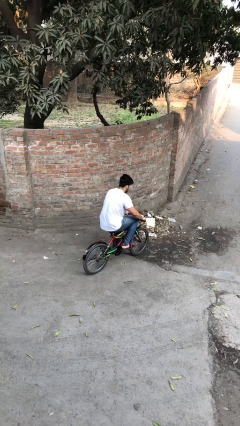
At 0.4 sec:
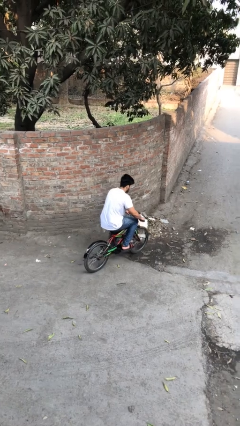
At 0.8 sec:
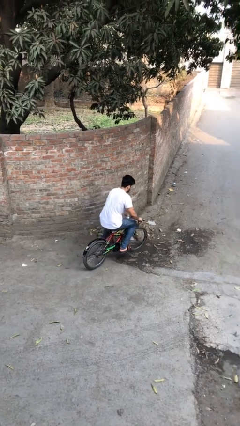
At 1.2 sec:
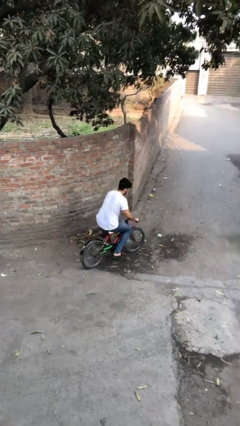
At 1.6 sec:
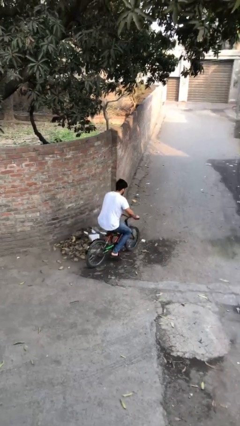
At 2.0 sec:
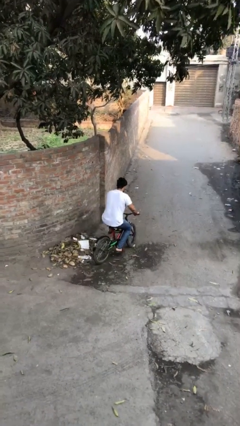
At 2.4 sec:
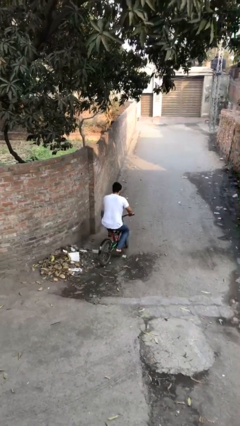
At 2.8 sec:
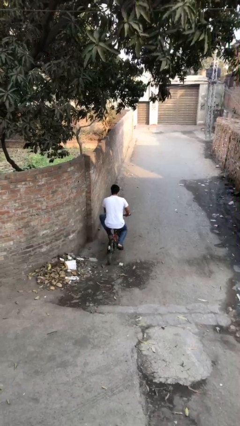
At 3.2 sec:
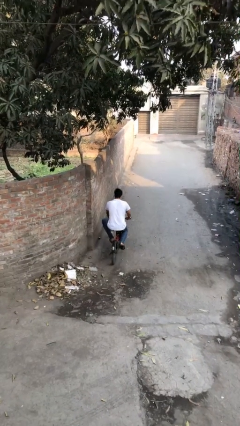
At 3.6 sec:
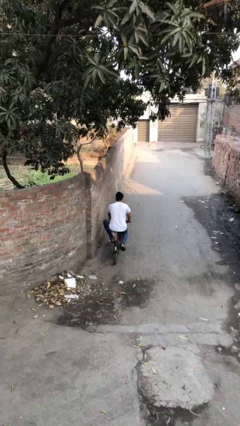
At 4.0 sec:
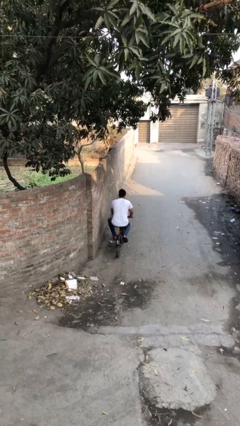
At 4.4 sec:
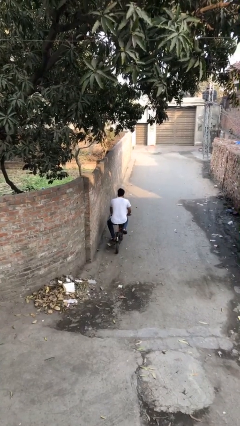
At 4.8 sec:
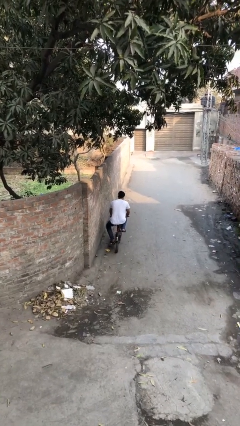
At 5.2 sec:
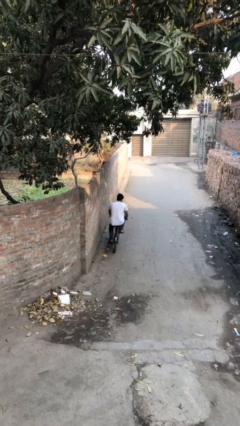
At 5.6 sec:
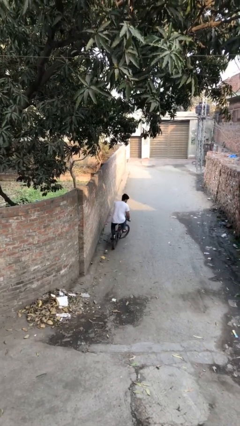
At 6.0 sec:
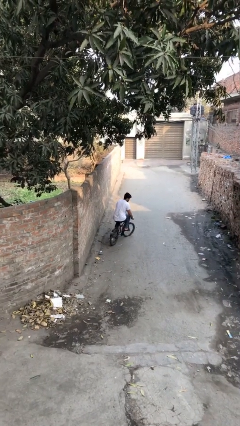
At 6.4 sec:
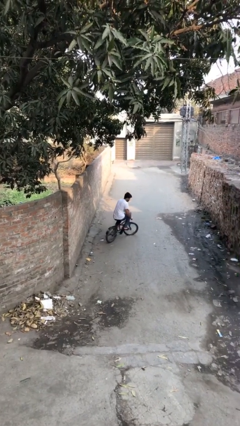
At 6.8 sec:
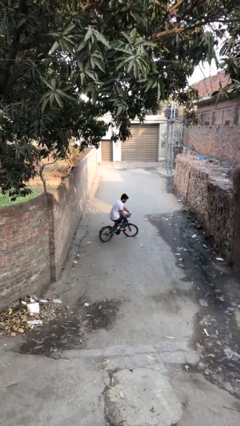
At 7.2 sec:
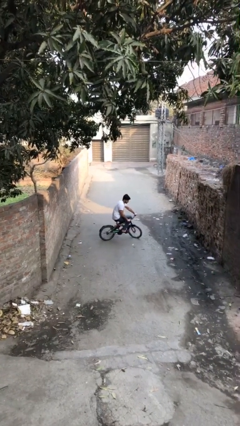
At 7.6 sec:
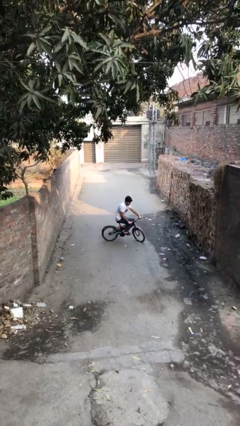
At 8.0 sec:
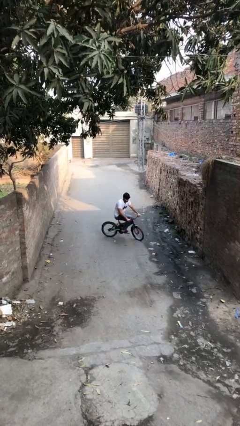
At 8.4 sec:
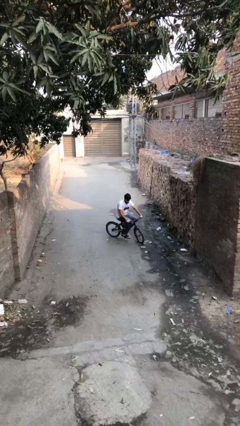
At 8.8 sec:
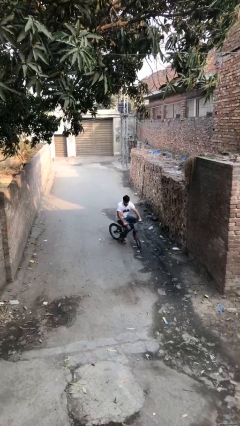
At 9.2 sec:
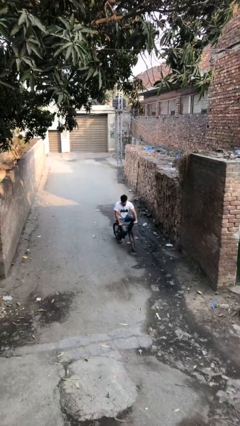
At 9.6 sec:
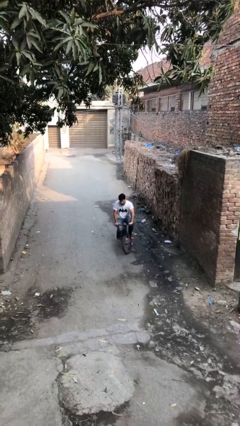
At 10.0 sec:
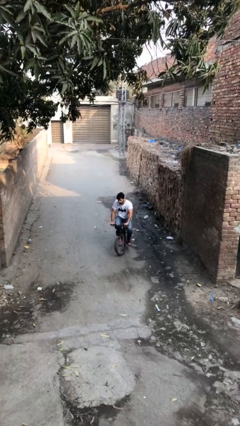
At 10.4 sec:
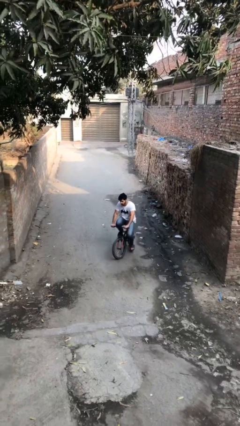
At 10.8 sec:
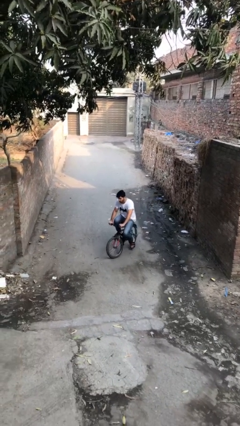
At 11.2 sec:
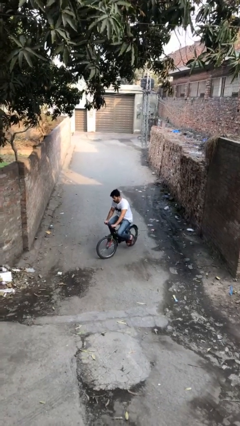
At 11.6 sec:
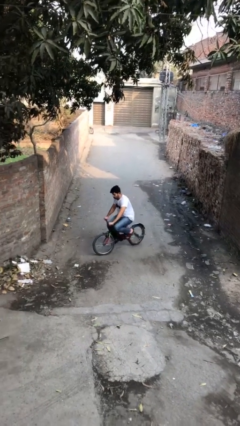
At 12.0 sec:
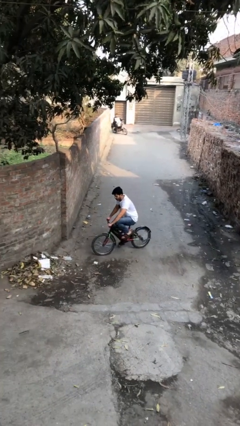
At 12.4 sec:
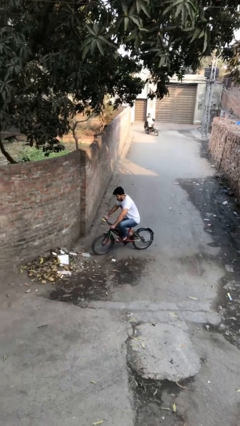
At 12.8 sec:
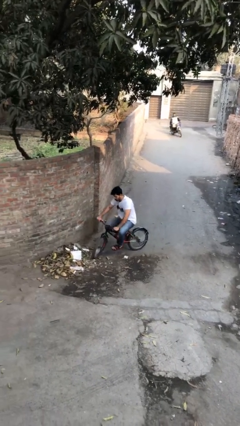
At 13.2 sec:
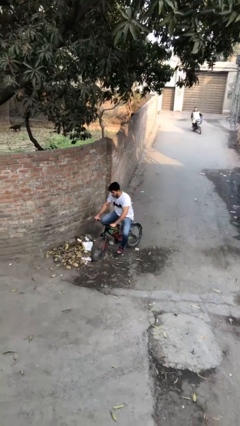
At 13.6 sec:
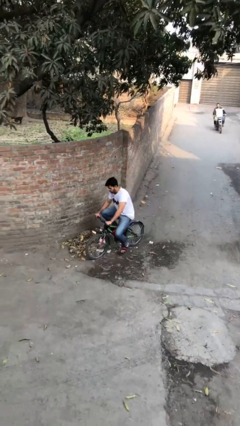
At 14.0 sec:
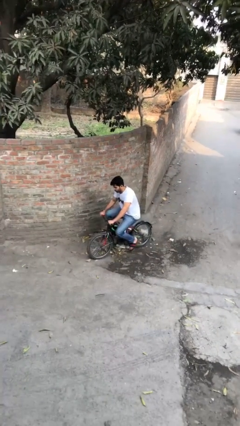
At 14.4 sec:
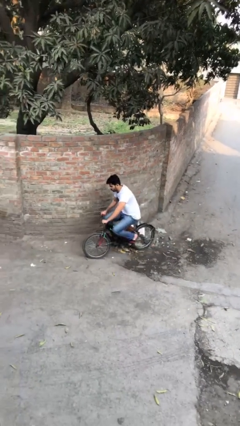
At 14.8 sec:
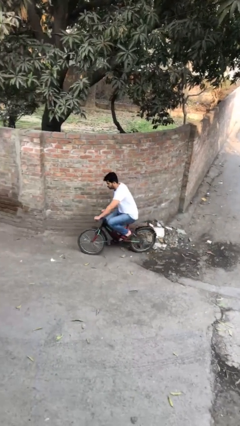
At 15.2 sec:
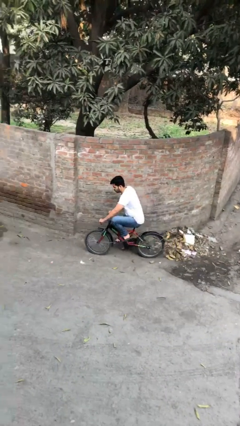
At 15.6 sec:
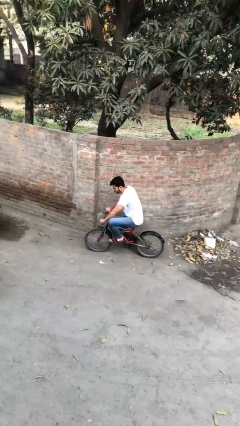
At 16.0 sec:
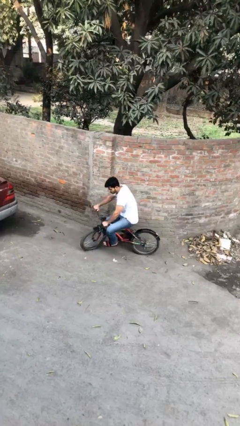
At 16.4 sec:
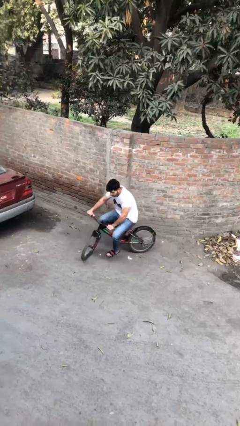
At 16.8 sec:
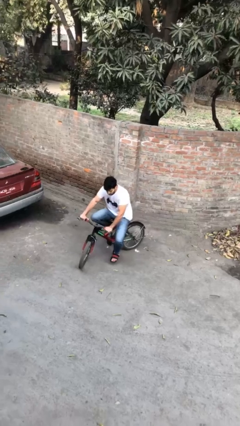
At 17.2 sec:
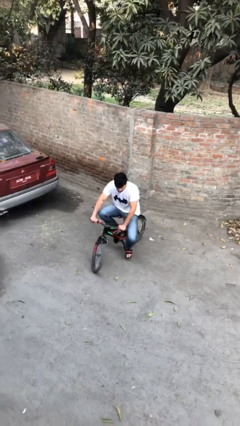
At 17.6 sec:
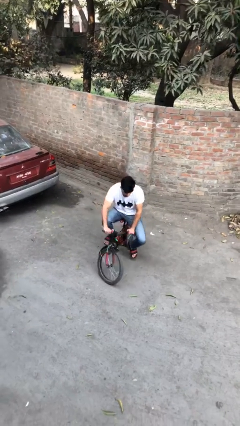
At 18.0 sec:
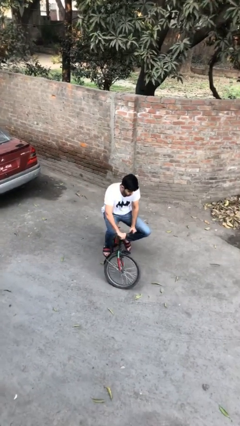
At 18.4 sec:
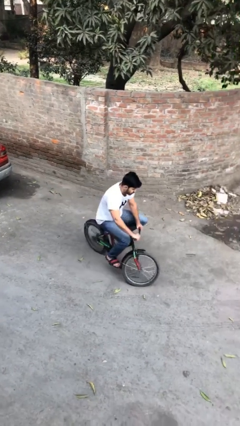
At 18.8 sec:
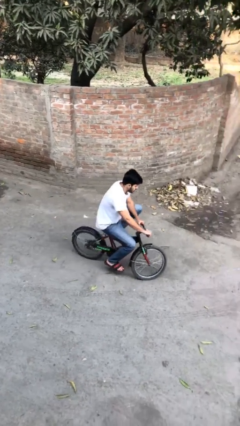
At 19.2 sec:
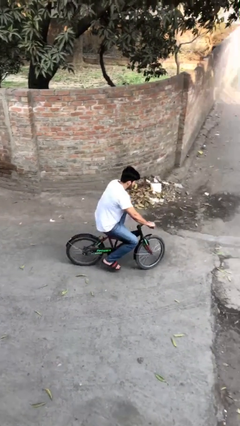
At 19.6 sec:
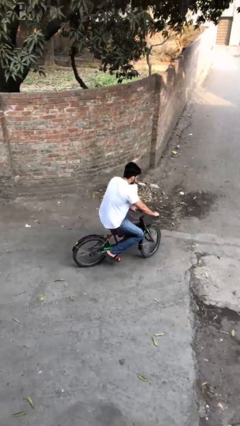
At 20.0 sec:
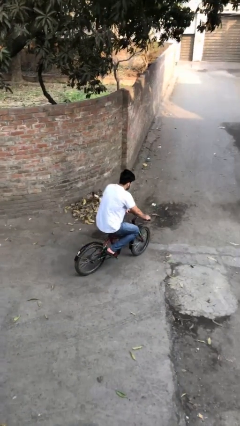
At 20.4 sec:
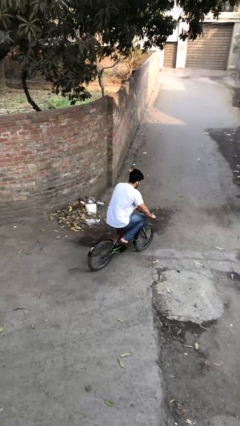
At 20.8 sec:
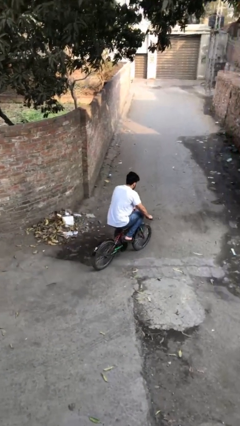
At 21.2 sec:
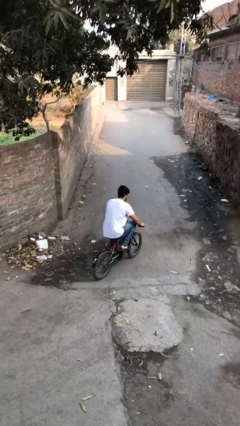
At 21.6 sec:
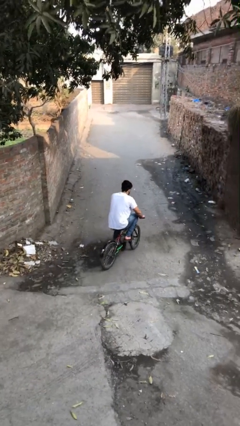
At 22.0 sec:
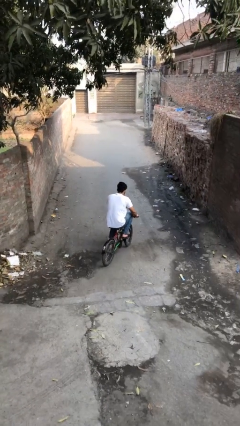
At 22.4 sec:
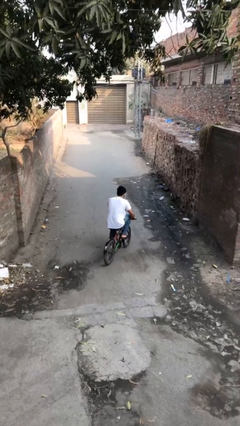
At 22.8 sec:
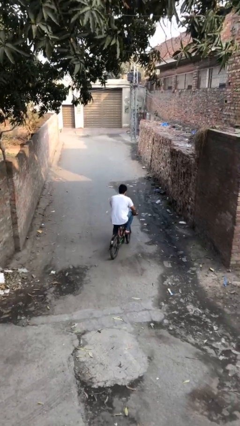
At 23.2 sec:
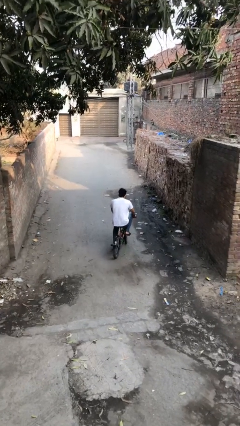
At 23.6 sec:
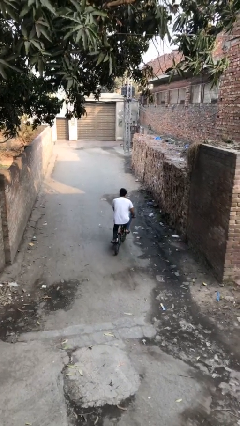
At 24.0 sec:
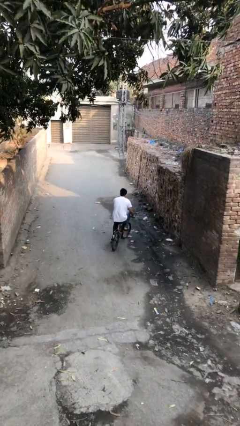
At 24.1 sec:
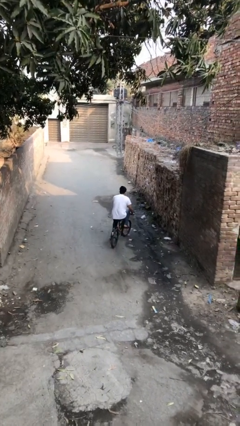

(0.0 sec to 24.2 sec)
person rides bicycle

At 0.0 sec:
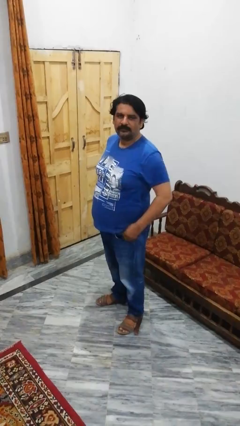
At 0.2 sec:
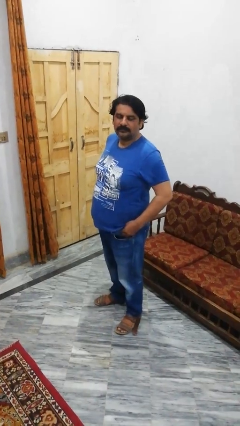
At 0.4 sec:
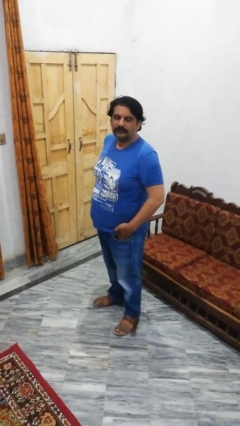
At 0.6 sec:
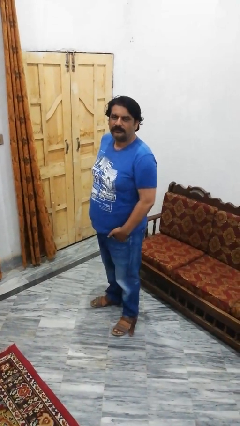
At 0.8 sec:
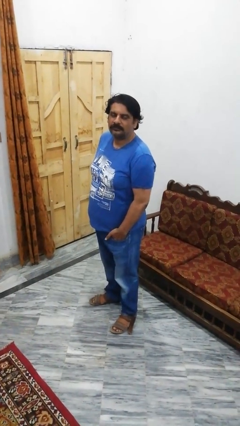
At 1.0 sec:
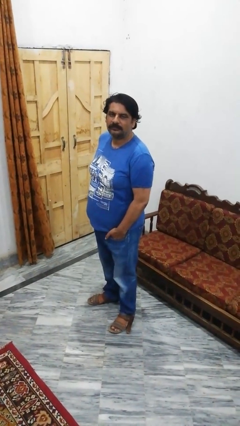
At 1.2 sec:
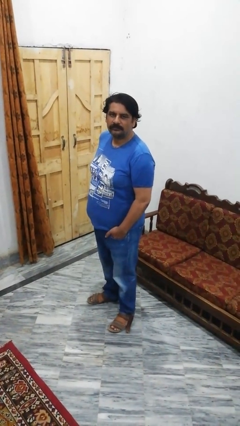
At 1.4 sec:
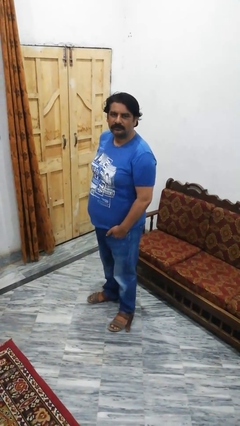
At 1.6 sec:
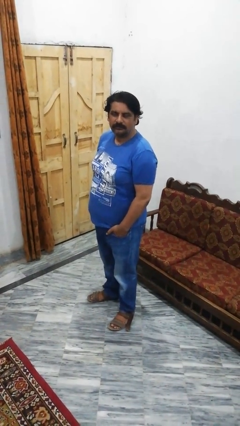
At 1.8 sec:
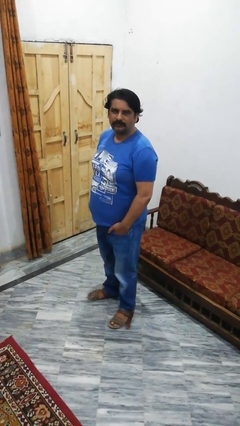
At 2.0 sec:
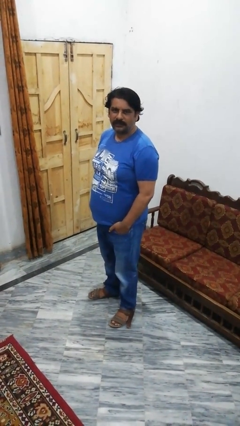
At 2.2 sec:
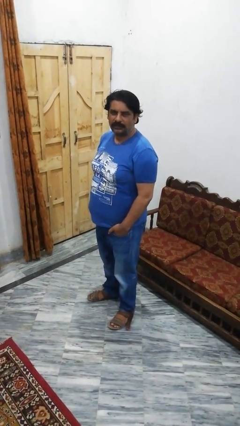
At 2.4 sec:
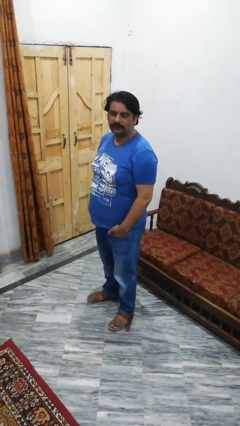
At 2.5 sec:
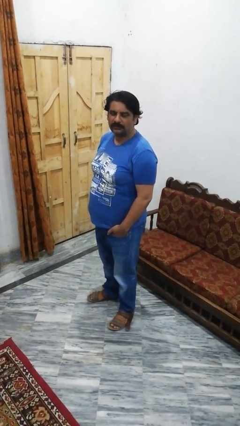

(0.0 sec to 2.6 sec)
person puts hands in back pockets

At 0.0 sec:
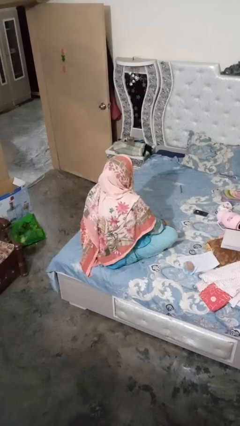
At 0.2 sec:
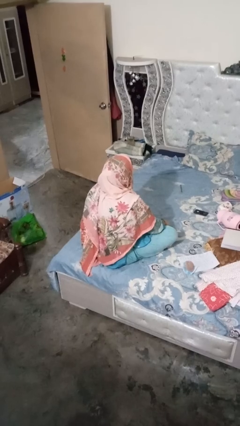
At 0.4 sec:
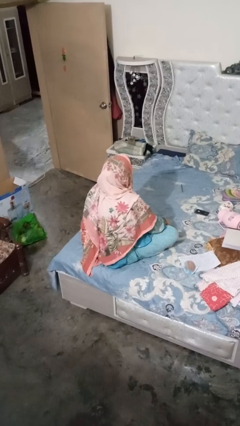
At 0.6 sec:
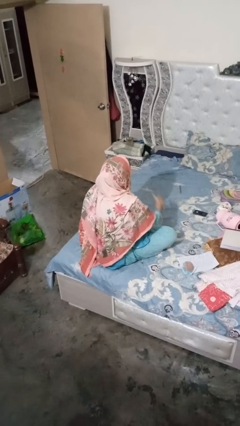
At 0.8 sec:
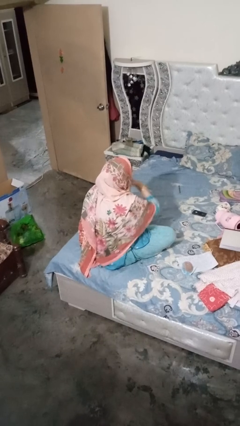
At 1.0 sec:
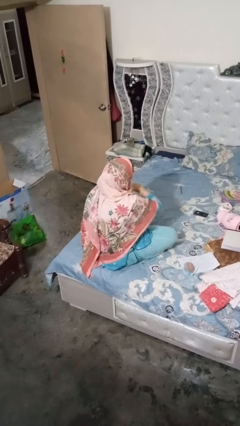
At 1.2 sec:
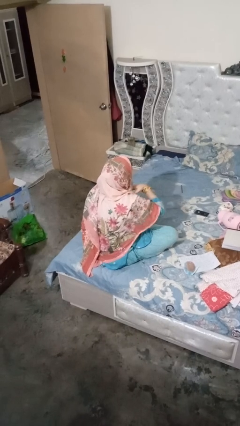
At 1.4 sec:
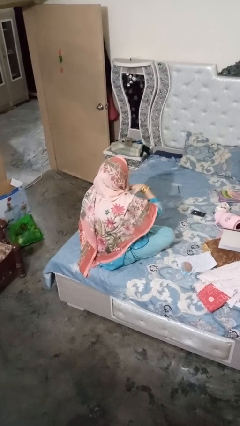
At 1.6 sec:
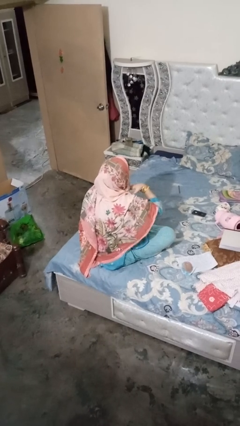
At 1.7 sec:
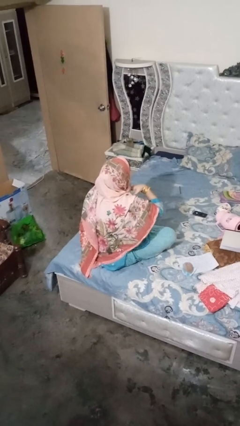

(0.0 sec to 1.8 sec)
person gestures cut

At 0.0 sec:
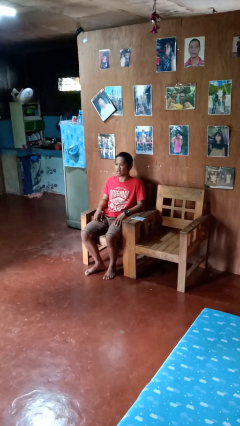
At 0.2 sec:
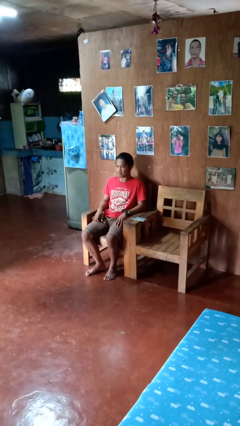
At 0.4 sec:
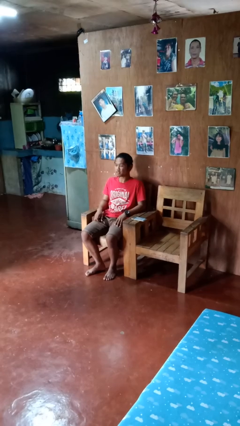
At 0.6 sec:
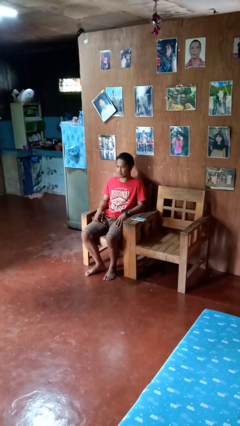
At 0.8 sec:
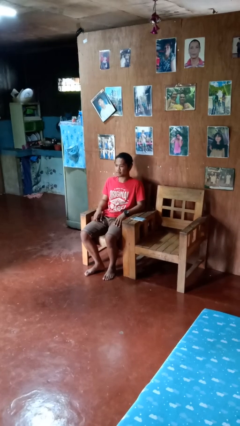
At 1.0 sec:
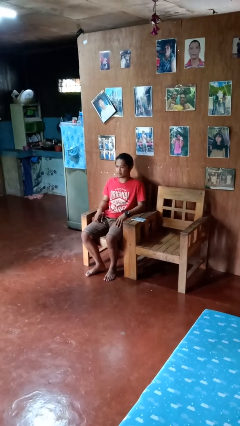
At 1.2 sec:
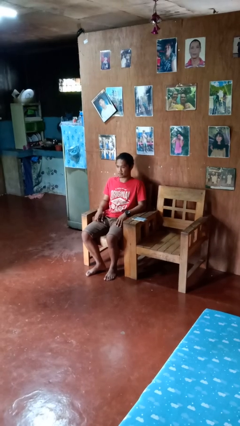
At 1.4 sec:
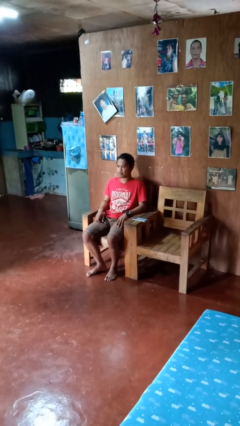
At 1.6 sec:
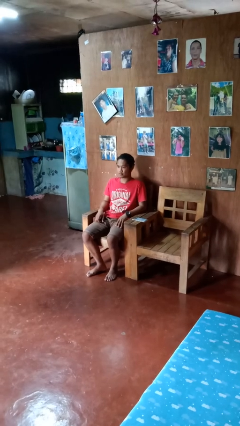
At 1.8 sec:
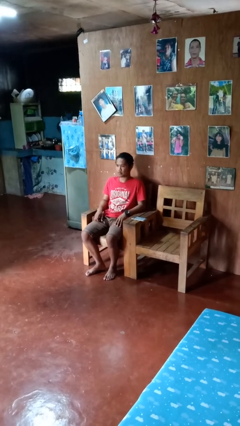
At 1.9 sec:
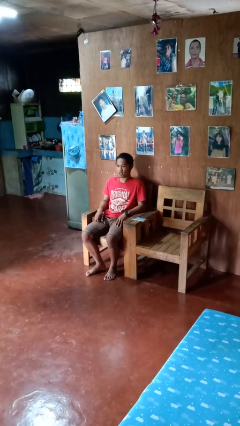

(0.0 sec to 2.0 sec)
person nods head
